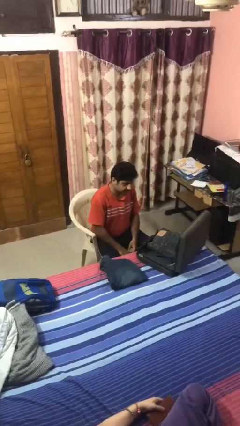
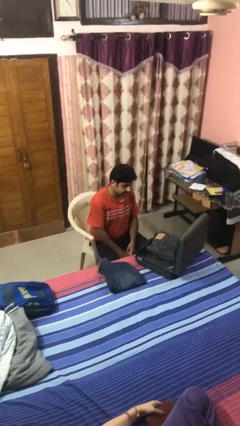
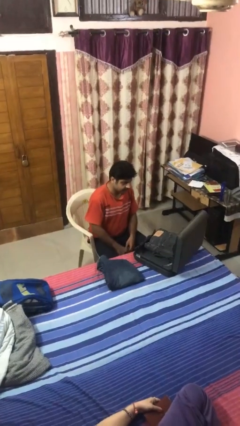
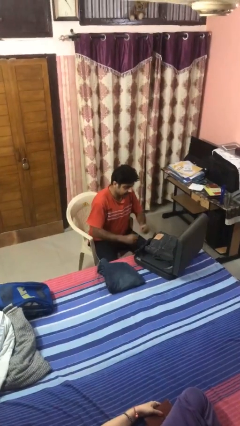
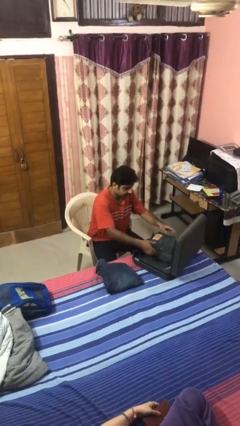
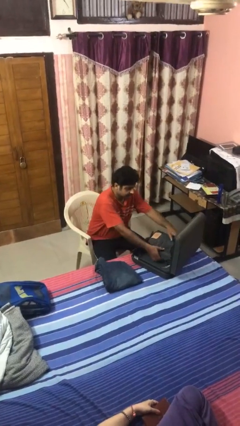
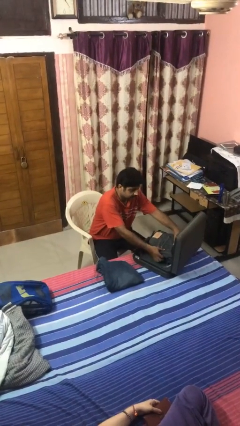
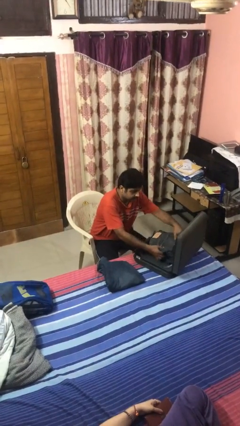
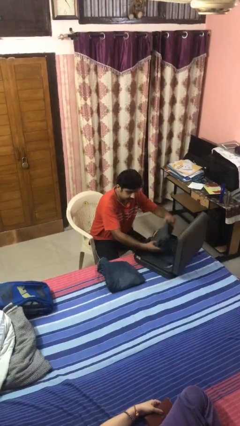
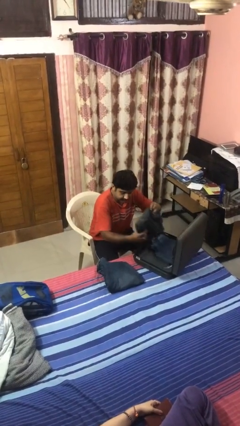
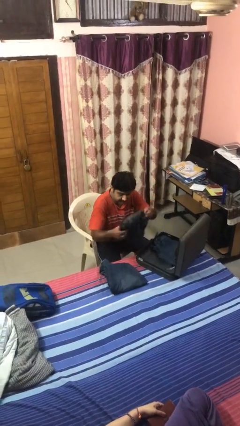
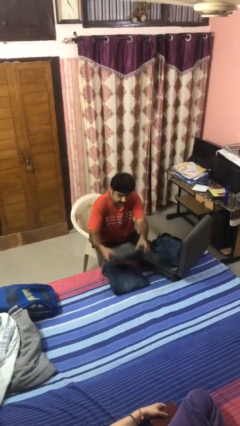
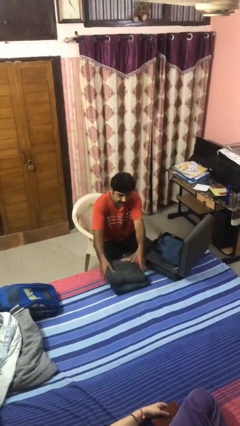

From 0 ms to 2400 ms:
person unloads clothes from suitcase

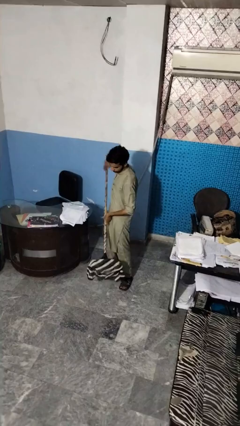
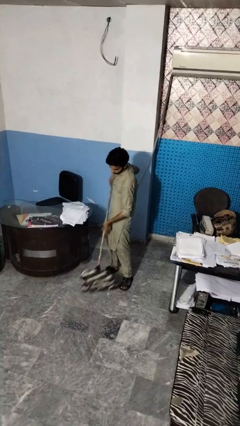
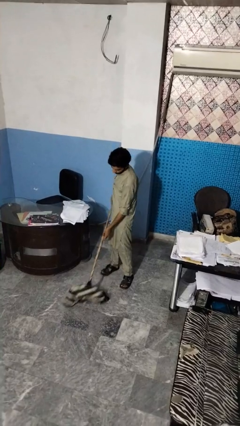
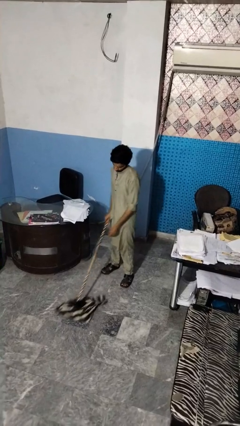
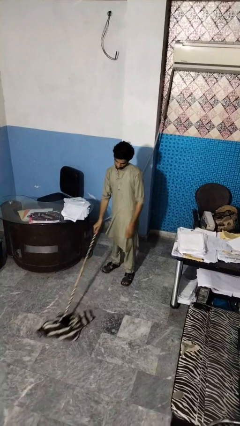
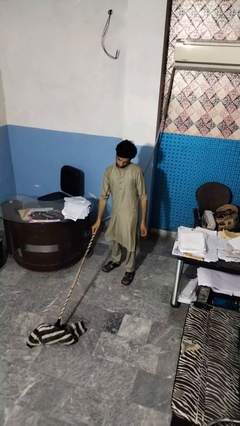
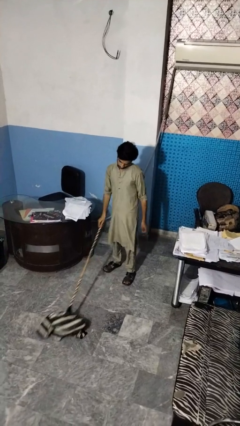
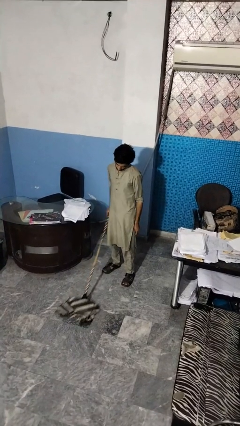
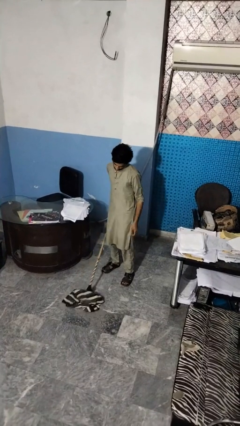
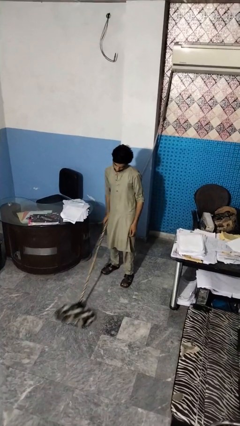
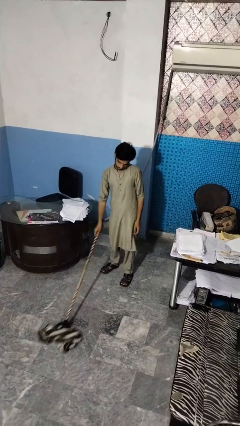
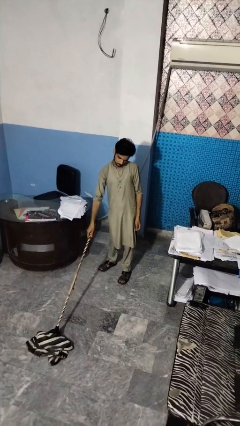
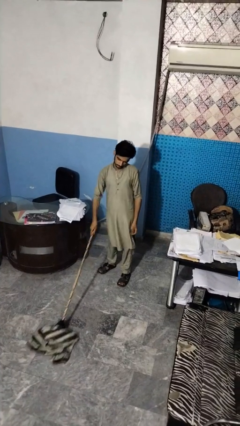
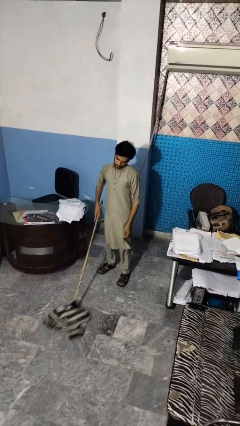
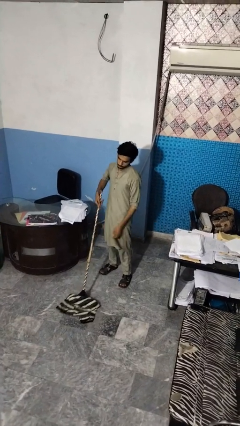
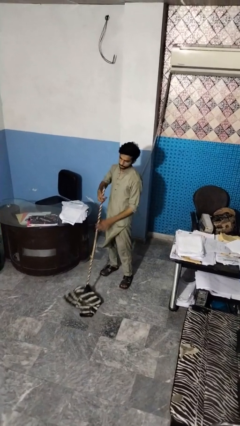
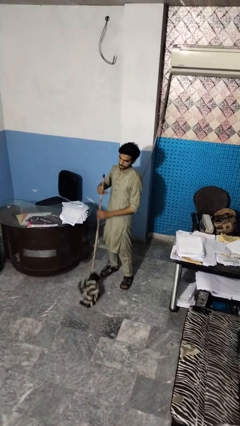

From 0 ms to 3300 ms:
person mops

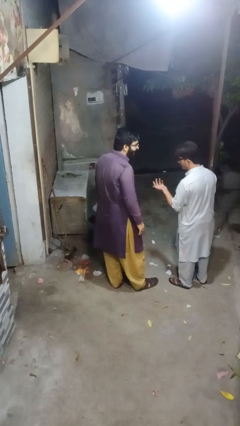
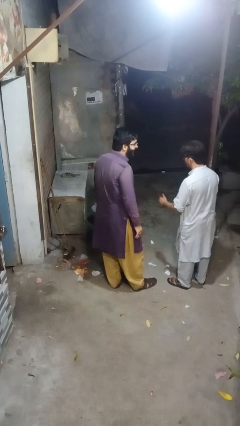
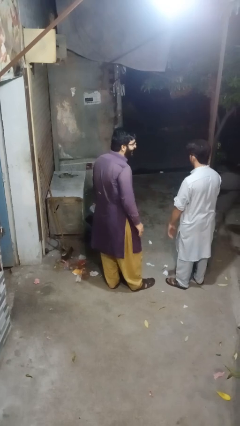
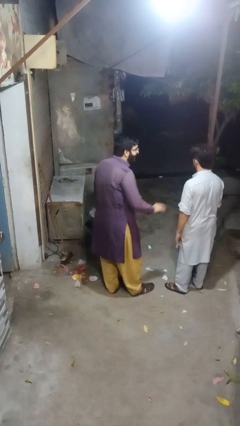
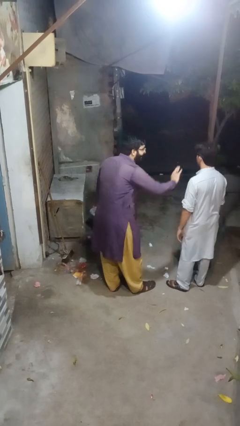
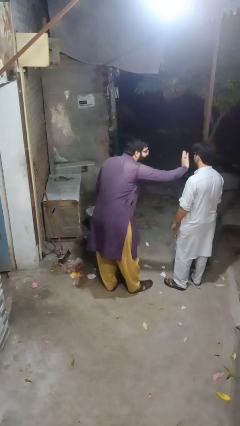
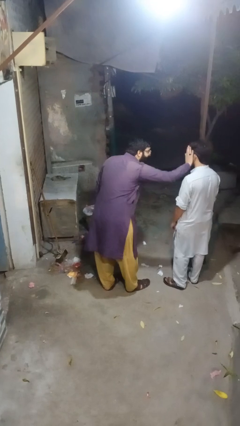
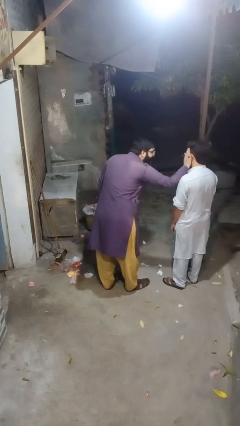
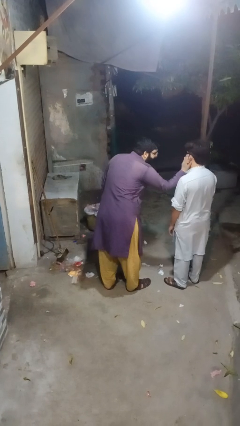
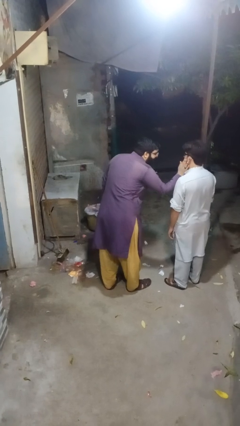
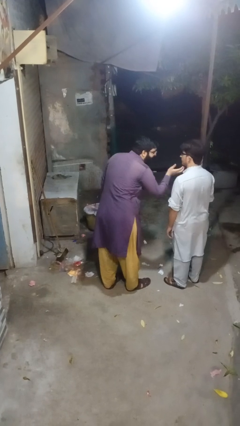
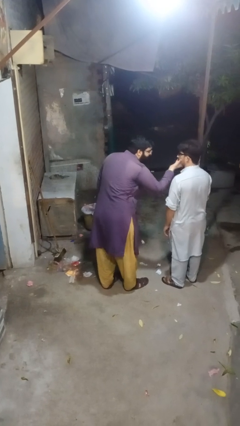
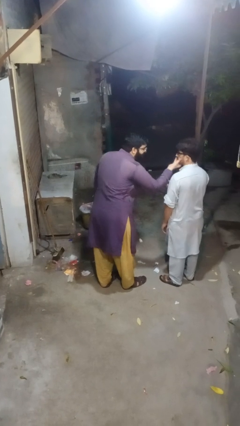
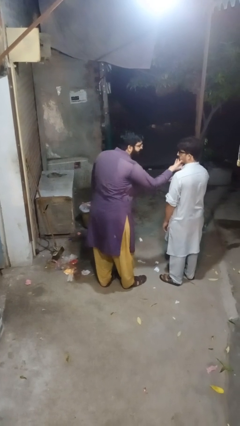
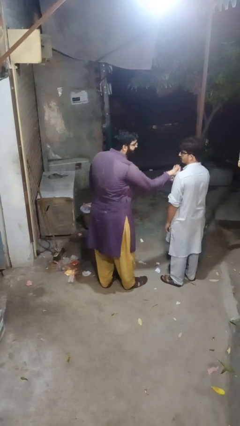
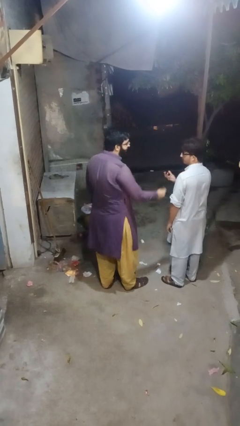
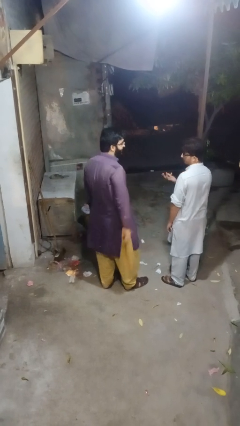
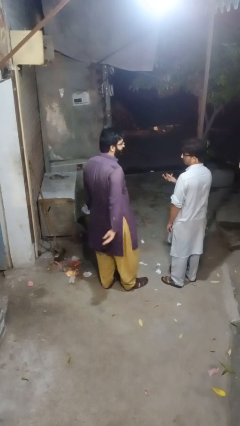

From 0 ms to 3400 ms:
person touches face of person

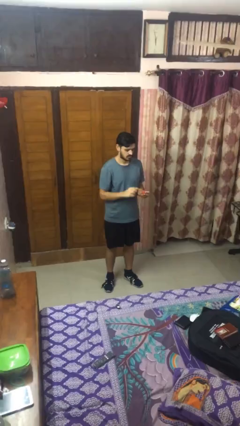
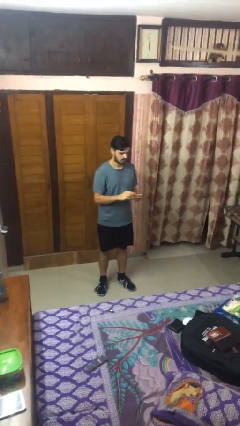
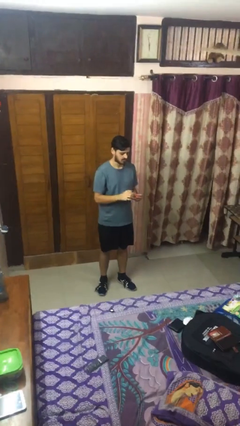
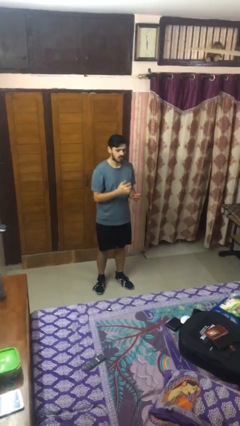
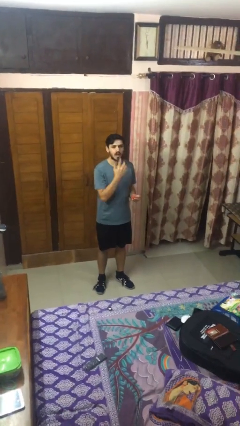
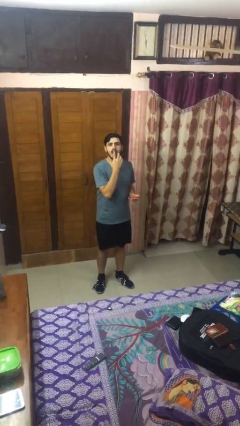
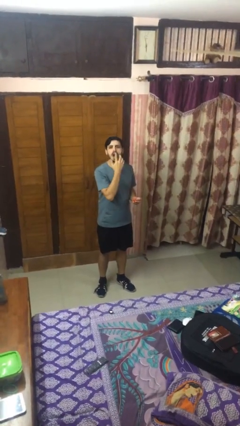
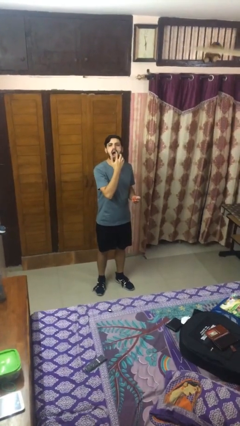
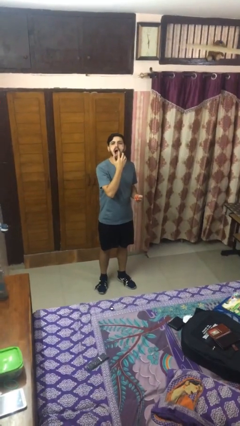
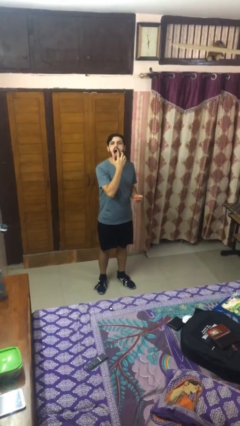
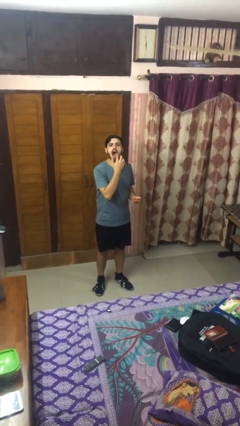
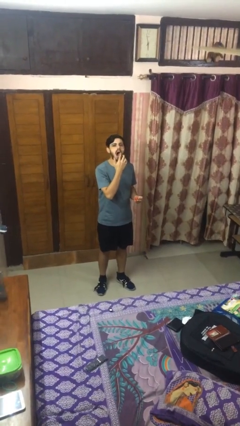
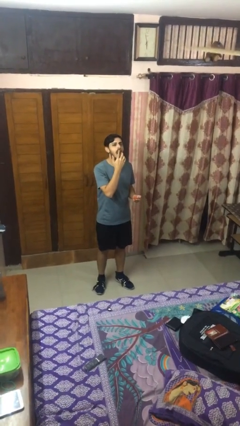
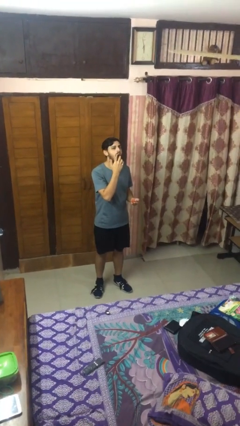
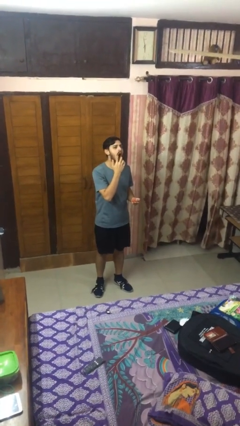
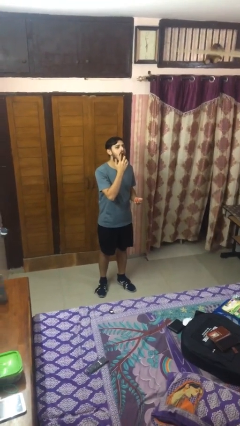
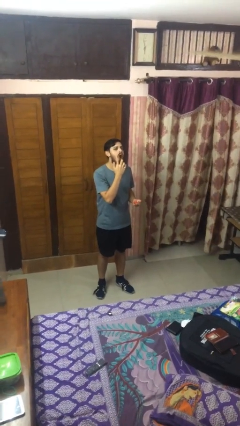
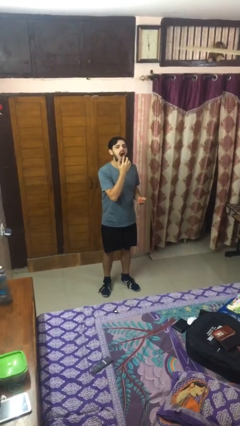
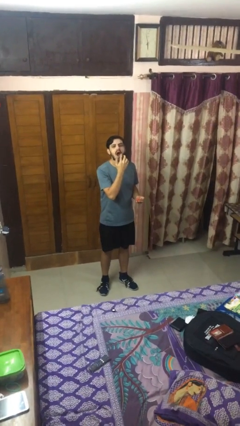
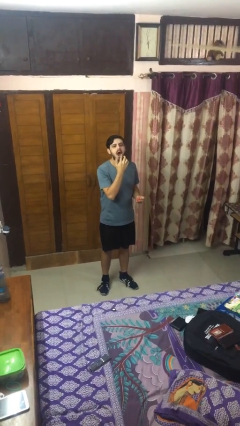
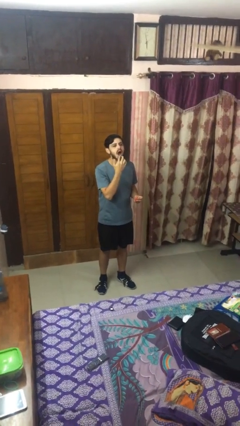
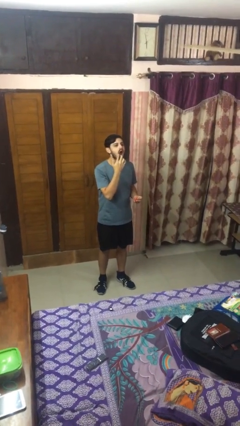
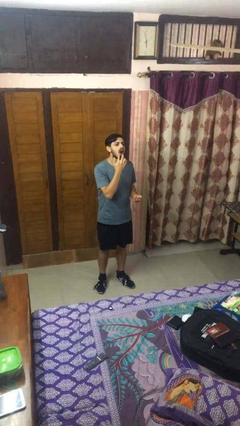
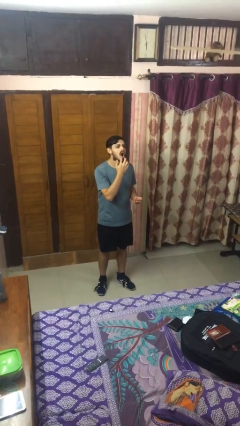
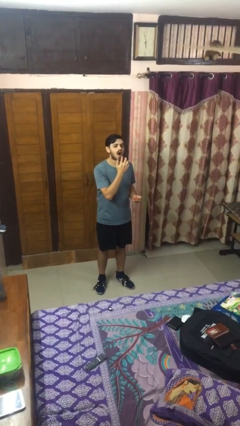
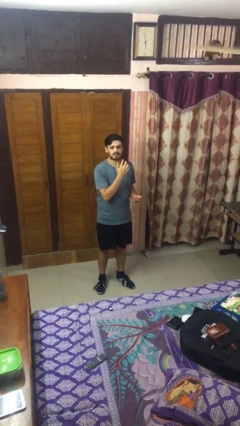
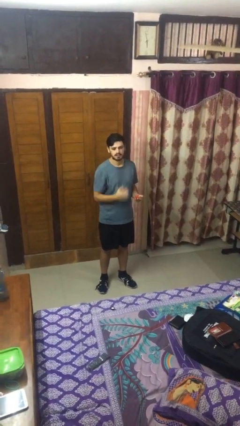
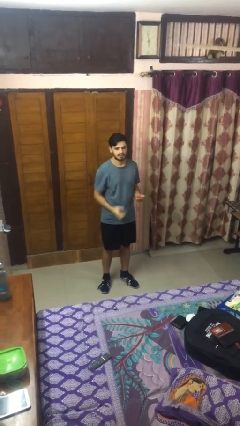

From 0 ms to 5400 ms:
person applies lip makeup

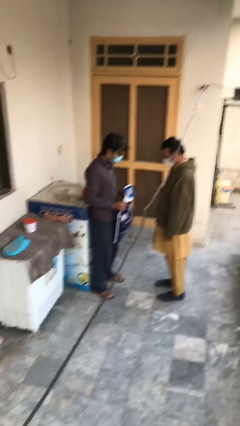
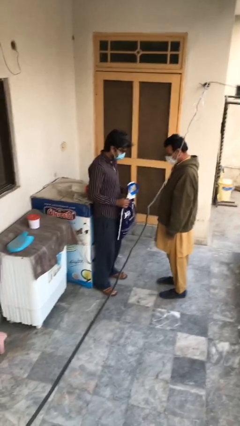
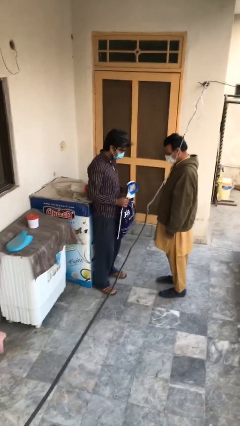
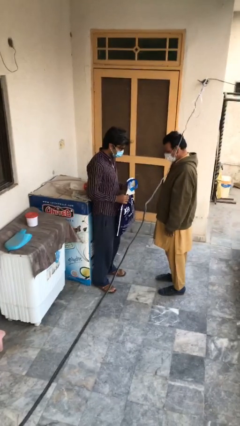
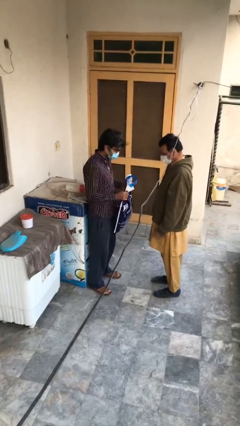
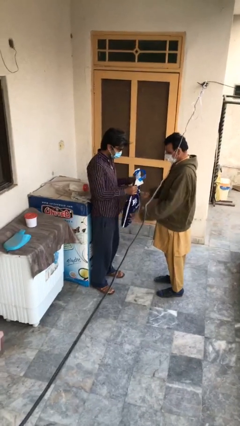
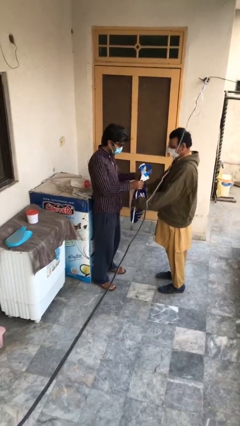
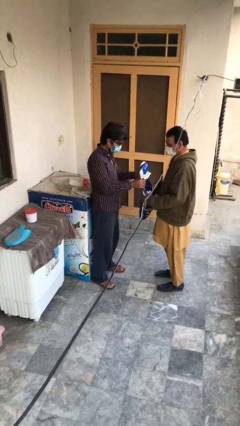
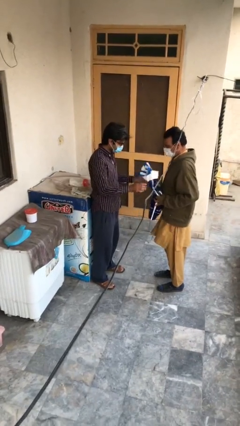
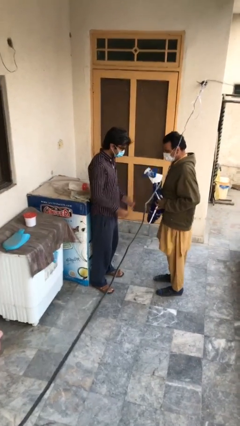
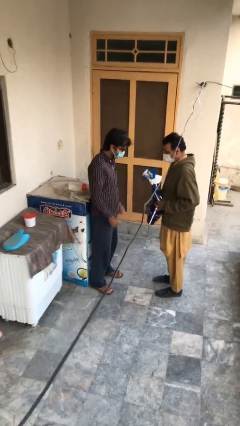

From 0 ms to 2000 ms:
person transfers object to person

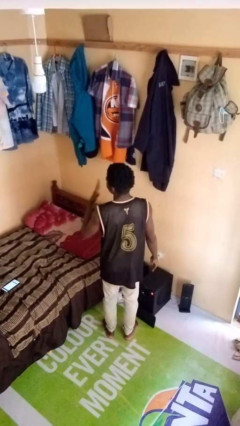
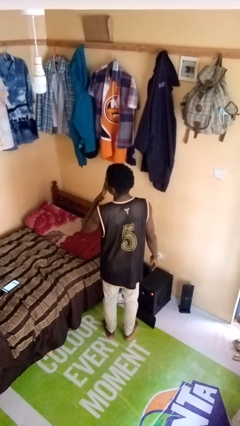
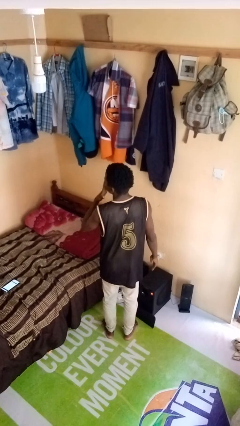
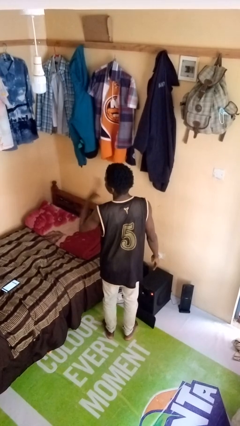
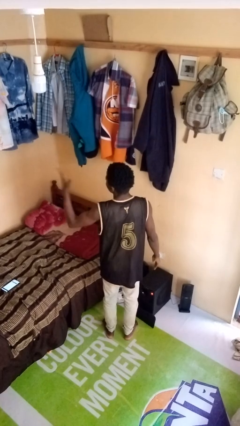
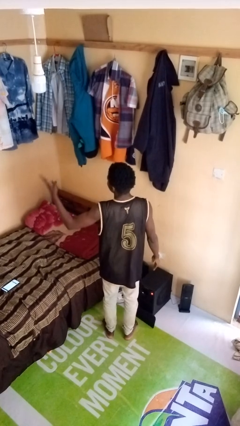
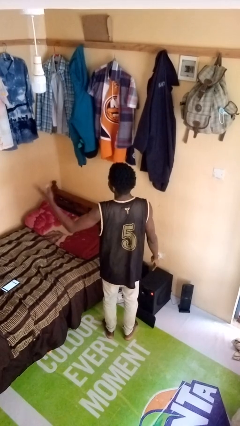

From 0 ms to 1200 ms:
person gestures blow kiss
